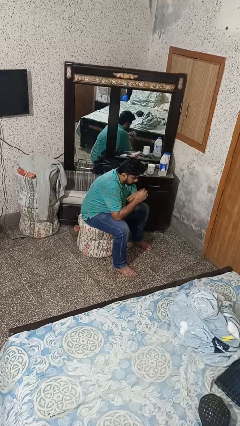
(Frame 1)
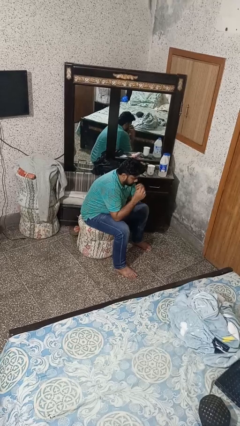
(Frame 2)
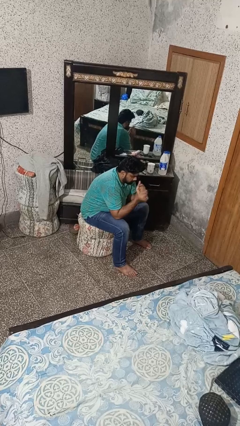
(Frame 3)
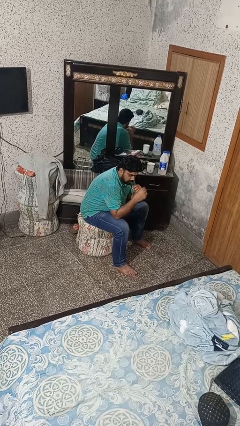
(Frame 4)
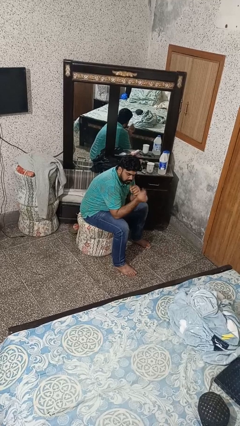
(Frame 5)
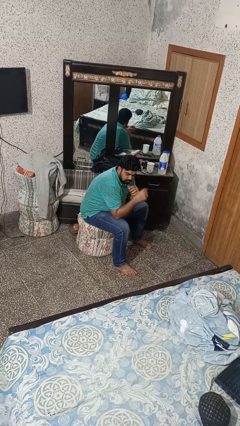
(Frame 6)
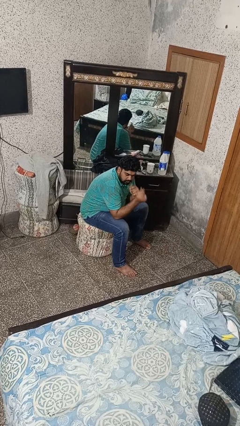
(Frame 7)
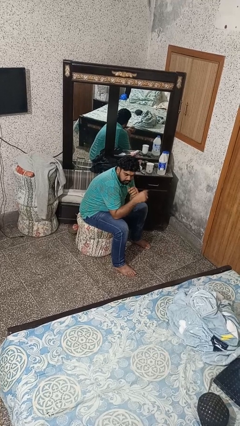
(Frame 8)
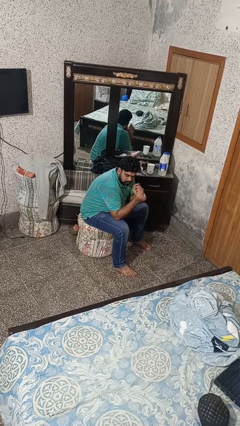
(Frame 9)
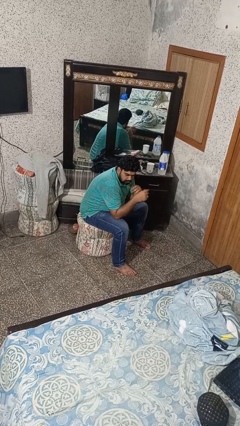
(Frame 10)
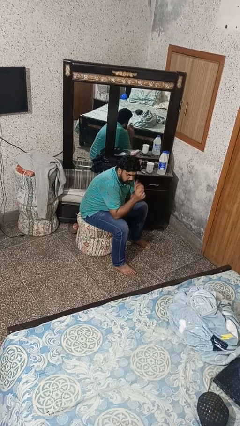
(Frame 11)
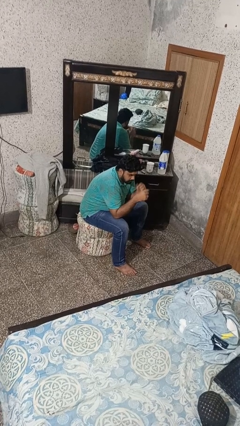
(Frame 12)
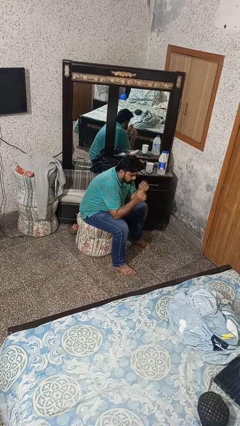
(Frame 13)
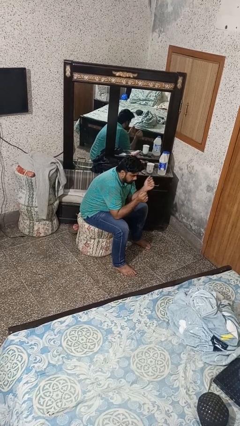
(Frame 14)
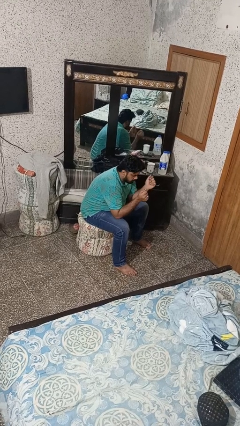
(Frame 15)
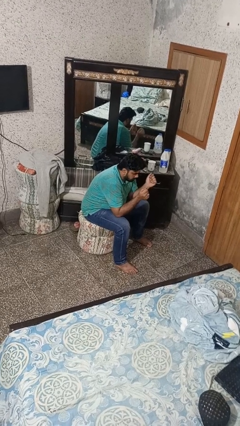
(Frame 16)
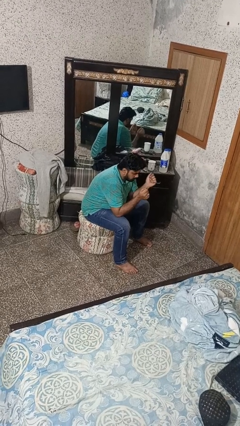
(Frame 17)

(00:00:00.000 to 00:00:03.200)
person snaps fingers

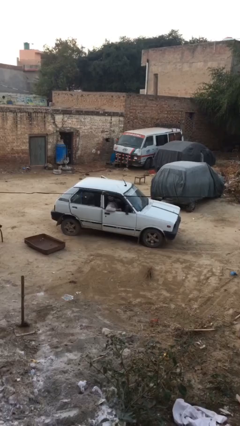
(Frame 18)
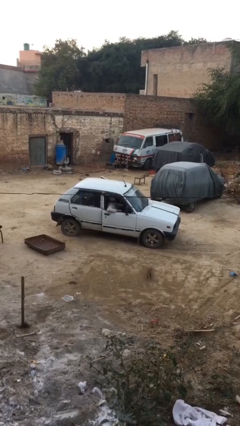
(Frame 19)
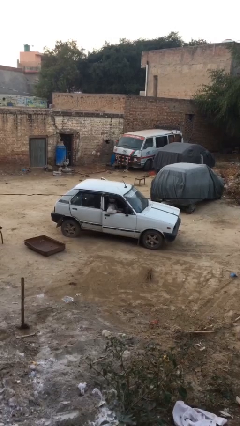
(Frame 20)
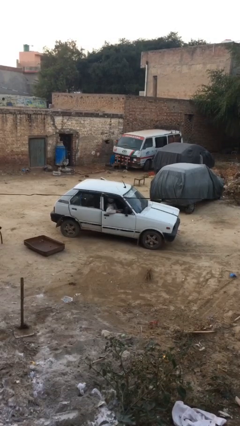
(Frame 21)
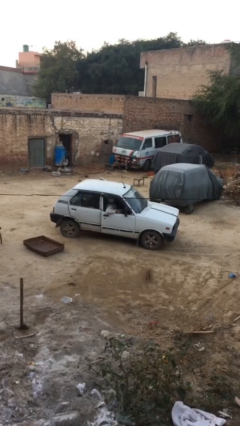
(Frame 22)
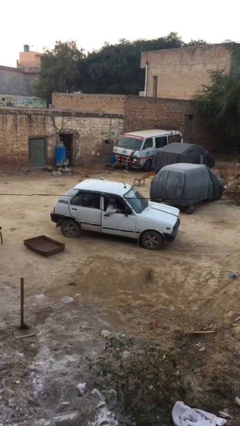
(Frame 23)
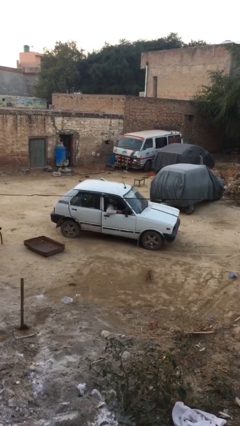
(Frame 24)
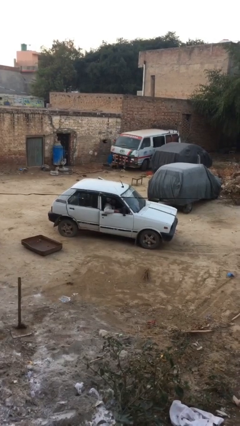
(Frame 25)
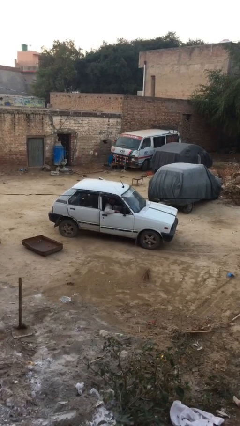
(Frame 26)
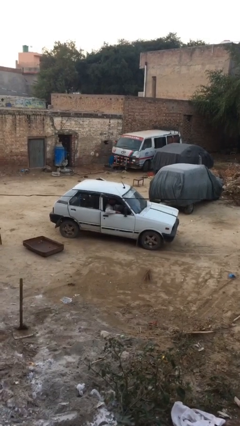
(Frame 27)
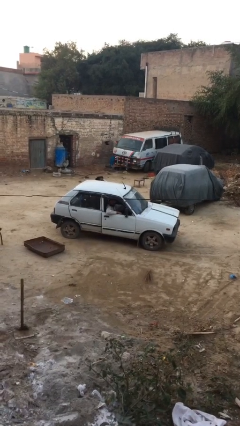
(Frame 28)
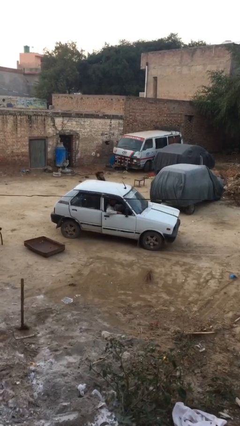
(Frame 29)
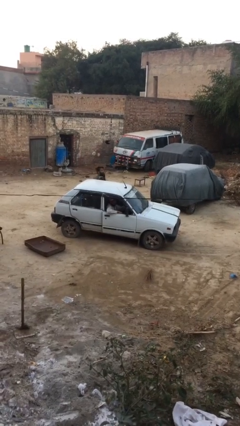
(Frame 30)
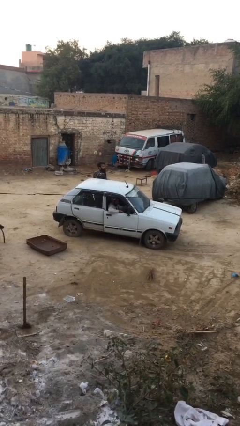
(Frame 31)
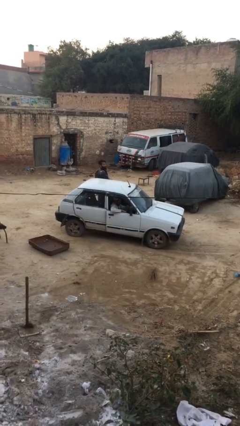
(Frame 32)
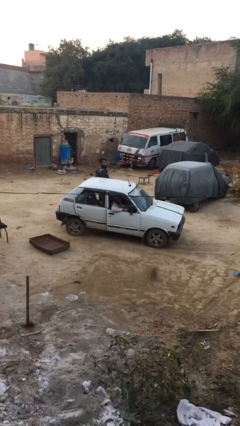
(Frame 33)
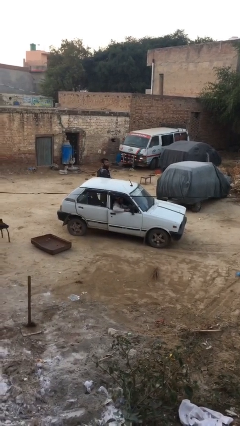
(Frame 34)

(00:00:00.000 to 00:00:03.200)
car drops off person

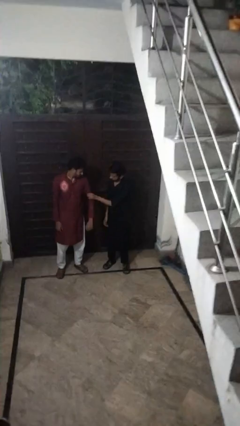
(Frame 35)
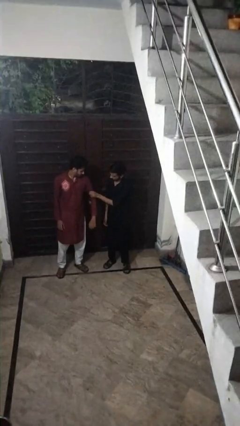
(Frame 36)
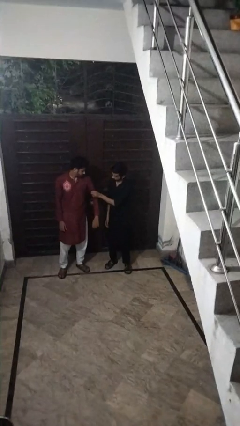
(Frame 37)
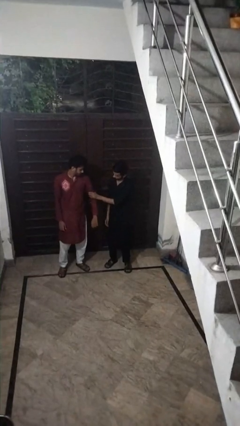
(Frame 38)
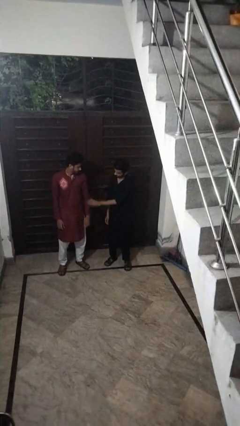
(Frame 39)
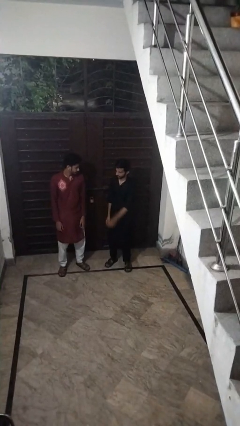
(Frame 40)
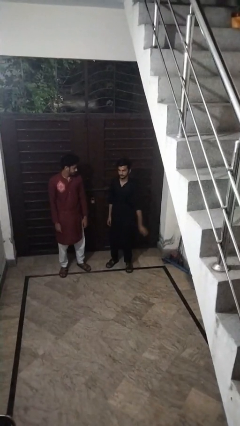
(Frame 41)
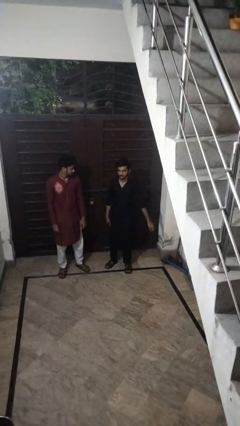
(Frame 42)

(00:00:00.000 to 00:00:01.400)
person grabs person by bicep

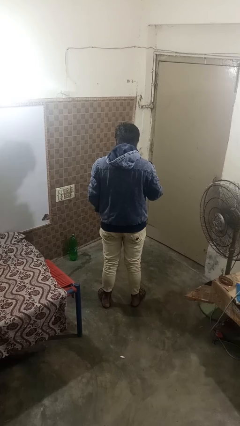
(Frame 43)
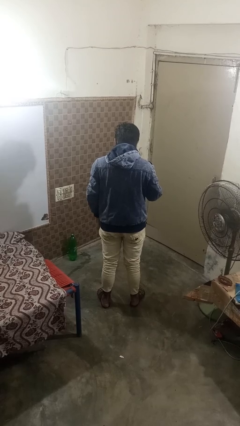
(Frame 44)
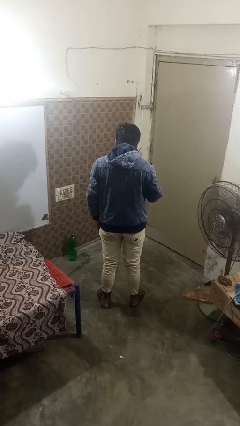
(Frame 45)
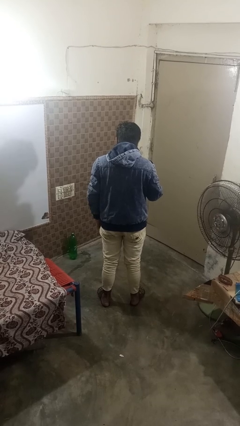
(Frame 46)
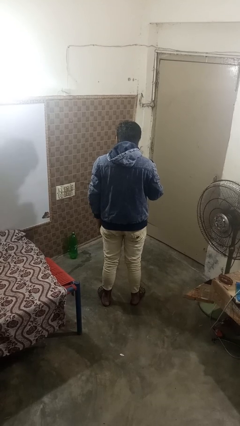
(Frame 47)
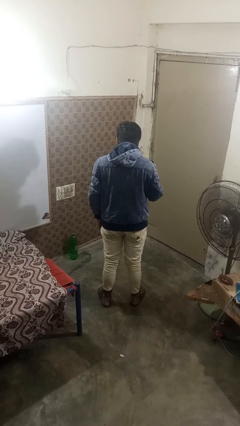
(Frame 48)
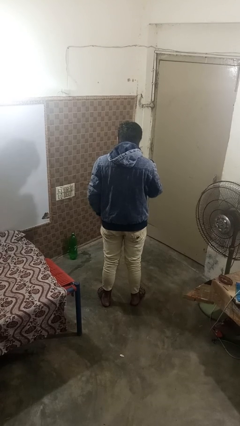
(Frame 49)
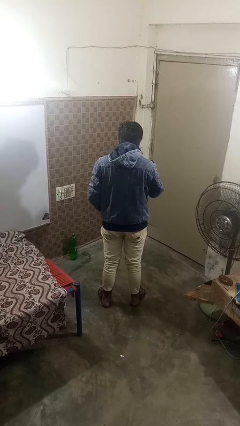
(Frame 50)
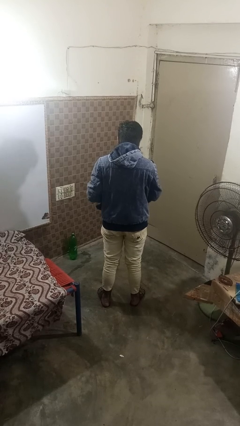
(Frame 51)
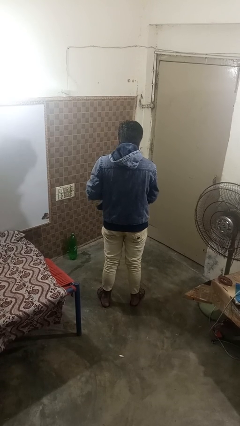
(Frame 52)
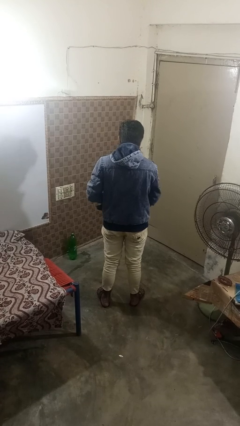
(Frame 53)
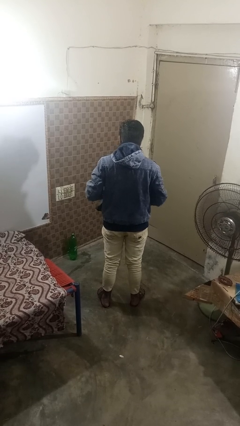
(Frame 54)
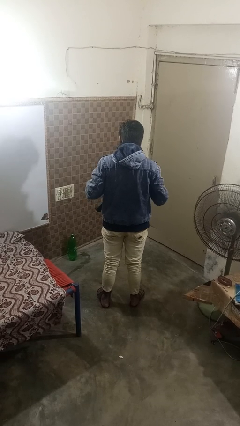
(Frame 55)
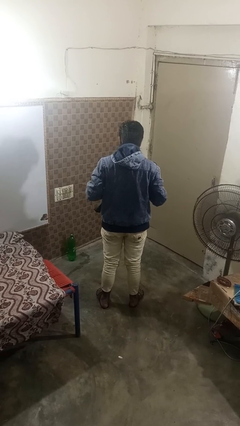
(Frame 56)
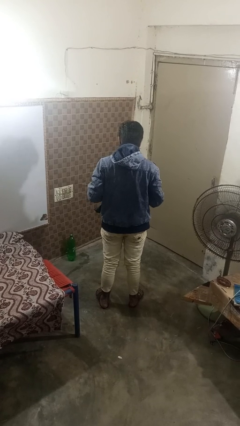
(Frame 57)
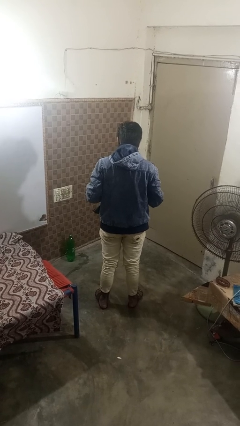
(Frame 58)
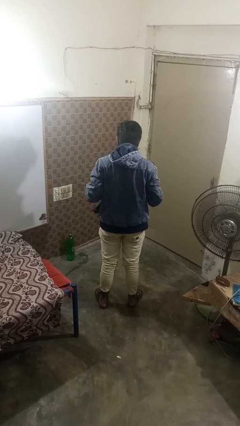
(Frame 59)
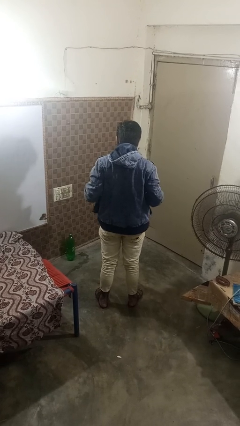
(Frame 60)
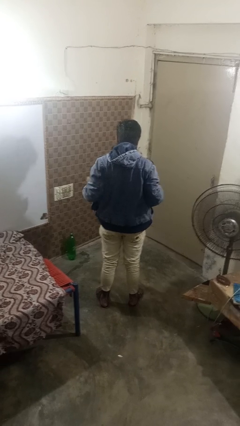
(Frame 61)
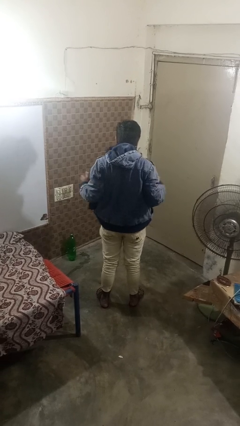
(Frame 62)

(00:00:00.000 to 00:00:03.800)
person unzips jacket

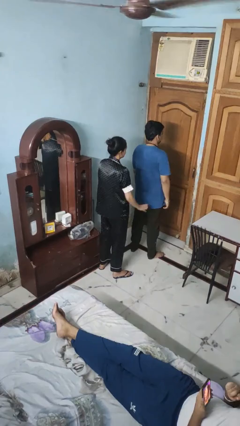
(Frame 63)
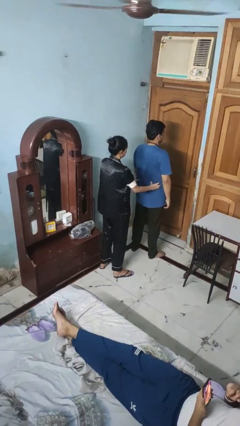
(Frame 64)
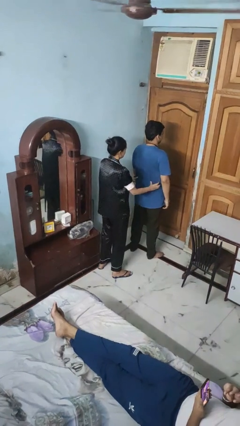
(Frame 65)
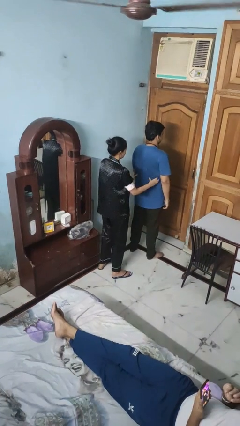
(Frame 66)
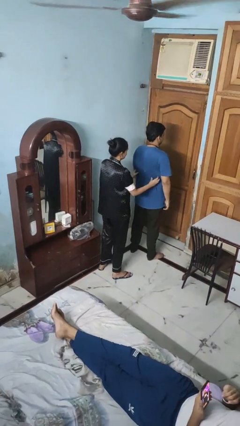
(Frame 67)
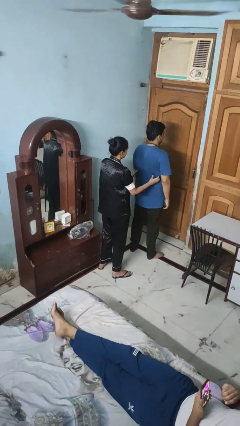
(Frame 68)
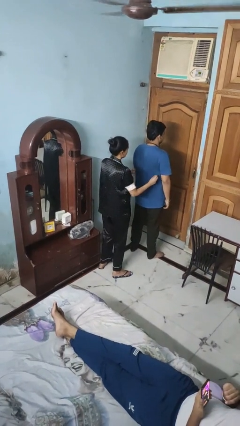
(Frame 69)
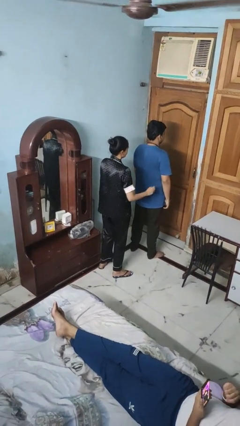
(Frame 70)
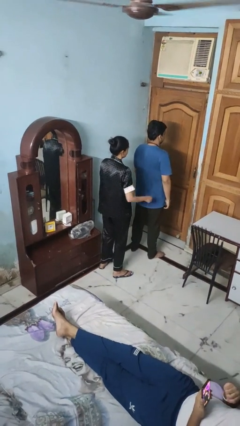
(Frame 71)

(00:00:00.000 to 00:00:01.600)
person tickles person

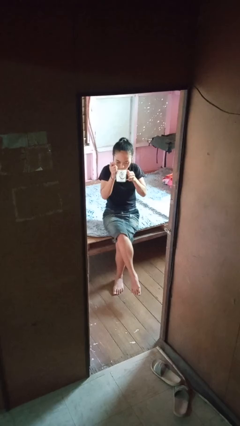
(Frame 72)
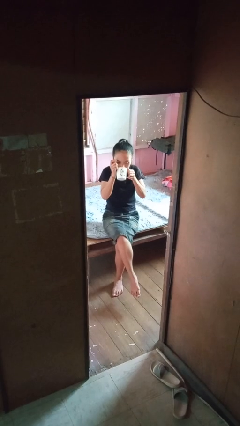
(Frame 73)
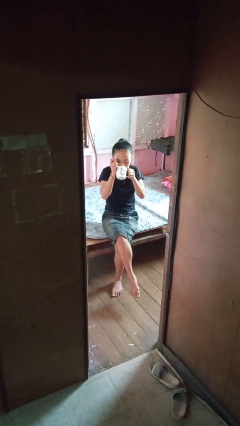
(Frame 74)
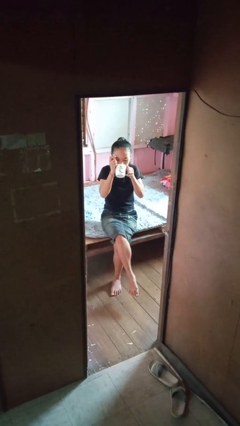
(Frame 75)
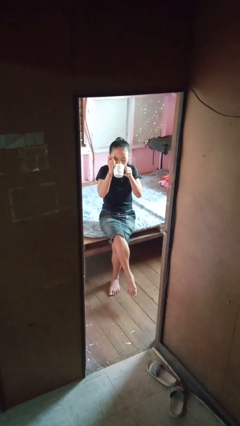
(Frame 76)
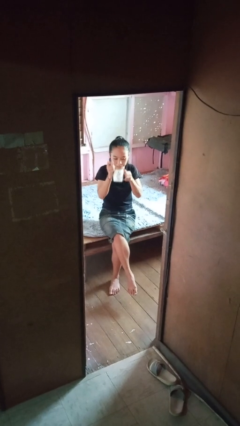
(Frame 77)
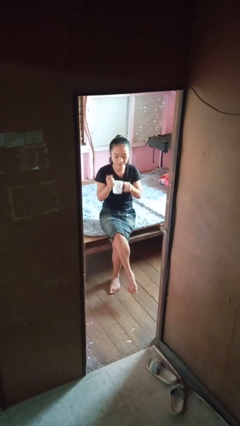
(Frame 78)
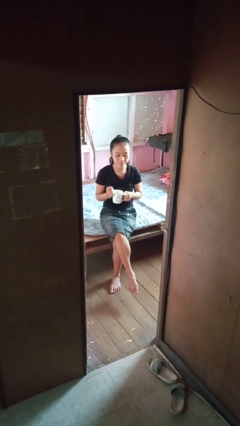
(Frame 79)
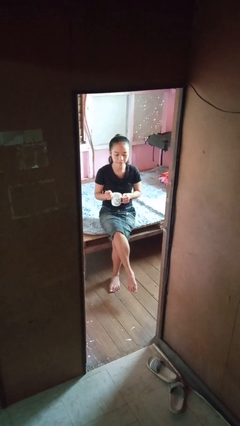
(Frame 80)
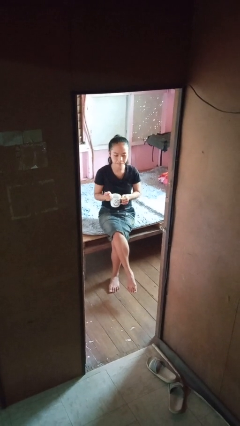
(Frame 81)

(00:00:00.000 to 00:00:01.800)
person drinks from mug

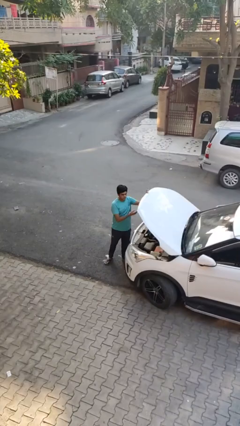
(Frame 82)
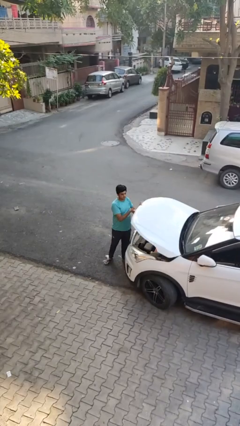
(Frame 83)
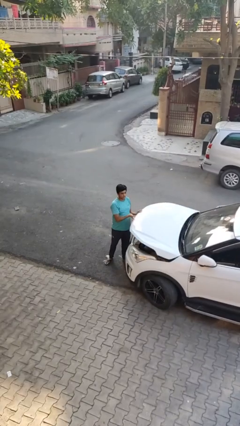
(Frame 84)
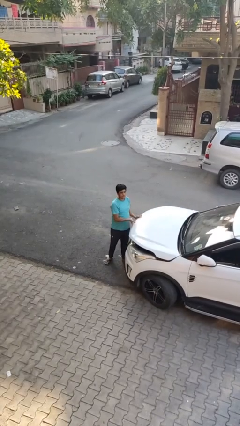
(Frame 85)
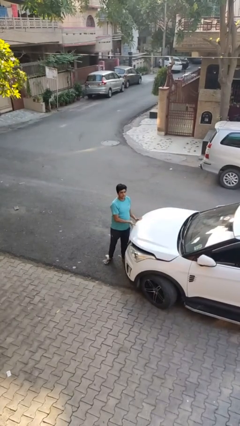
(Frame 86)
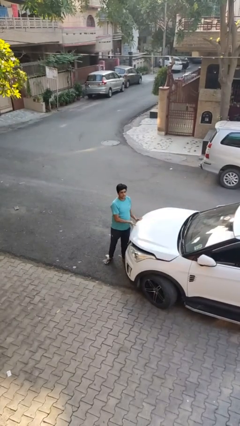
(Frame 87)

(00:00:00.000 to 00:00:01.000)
person closes car hood

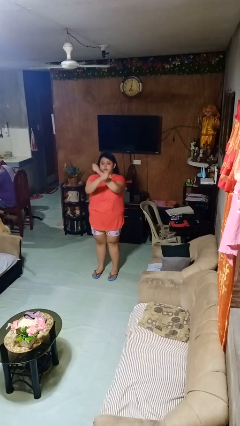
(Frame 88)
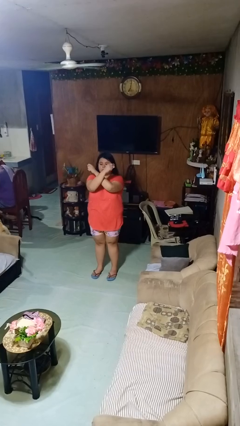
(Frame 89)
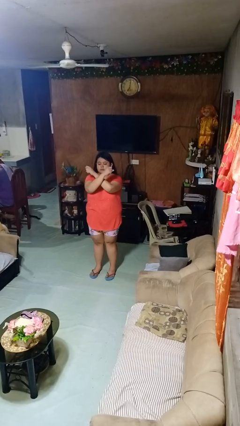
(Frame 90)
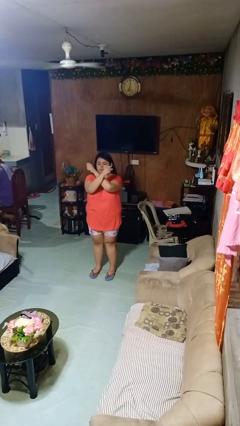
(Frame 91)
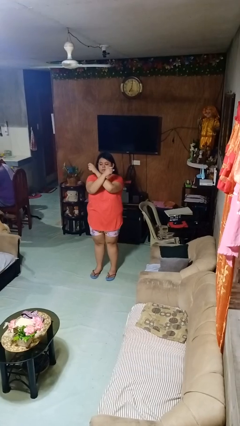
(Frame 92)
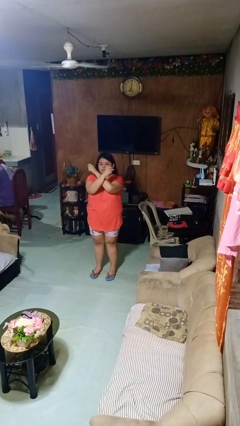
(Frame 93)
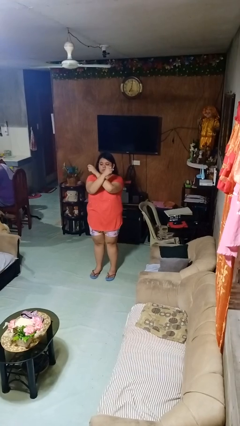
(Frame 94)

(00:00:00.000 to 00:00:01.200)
person gestures arms x
